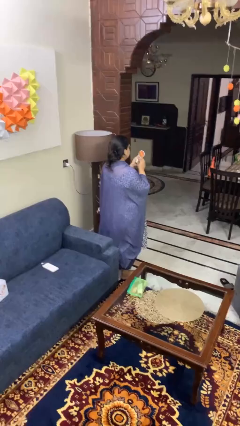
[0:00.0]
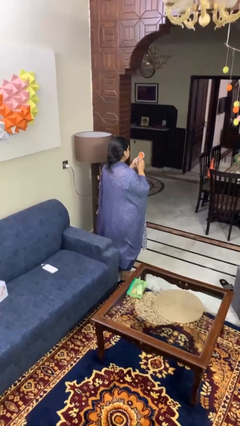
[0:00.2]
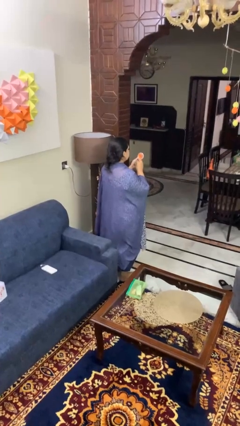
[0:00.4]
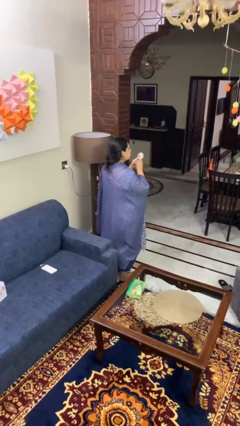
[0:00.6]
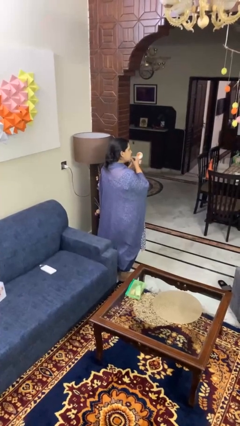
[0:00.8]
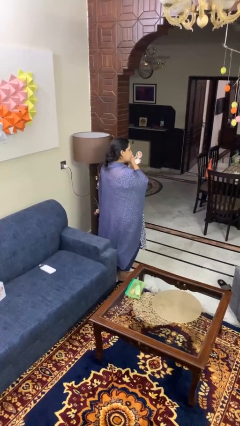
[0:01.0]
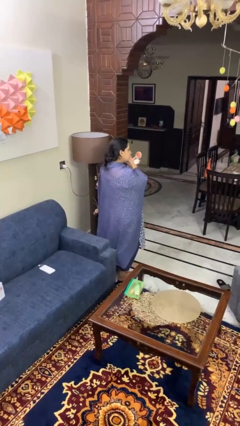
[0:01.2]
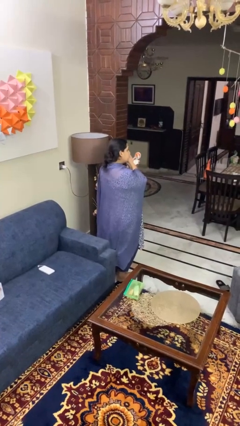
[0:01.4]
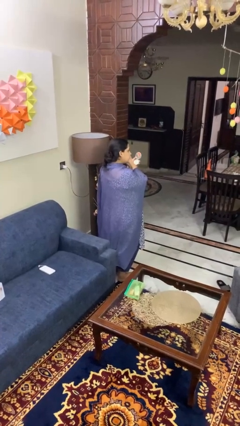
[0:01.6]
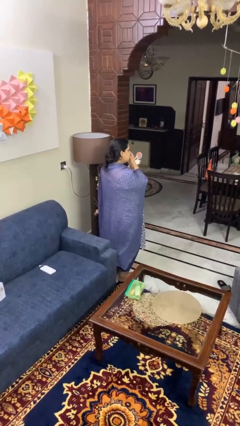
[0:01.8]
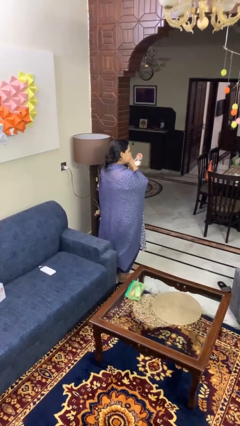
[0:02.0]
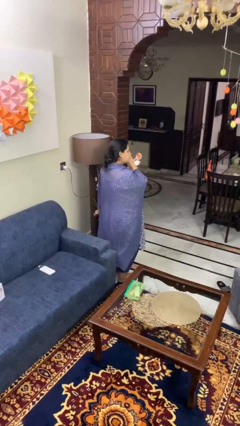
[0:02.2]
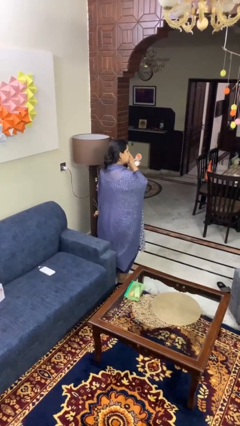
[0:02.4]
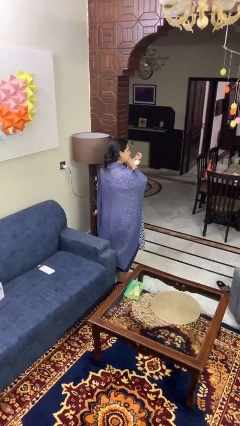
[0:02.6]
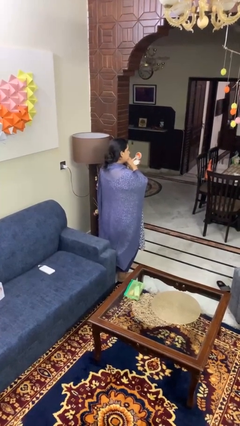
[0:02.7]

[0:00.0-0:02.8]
person applies foundation makeup

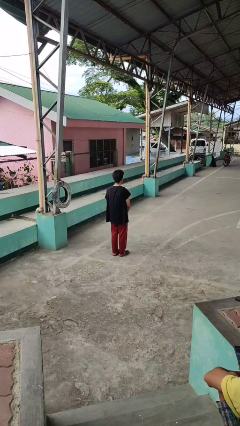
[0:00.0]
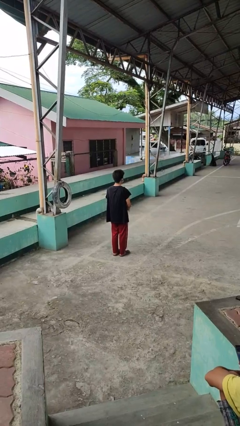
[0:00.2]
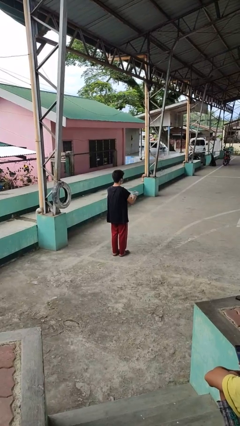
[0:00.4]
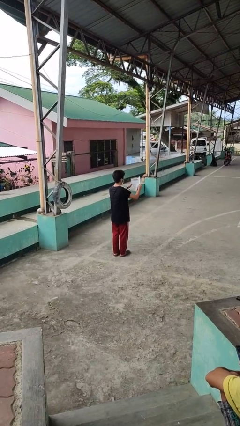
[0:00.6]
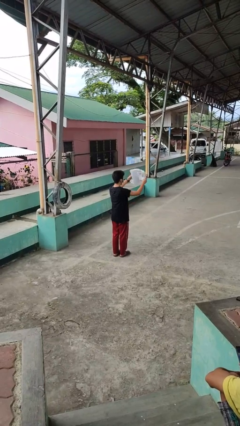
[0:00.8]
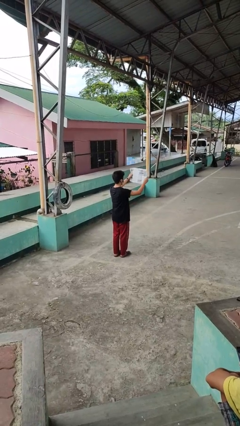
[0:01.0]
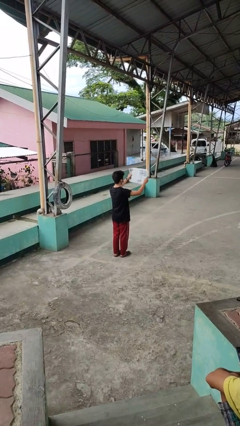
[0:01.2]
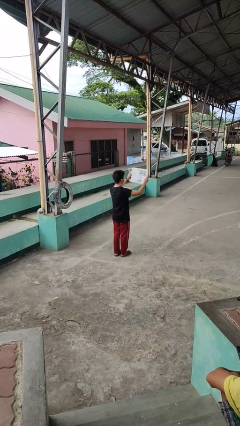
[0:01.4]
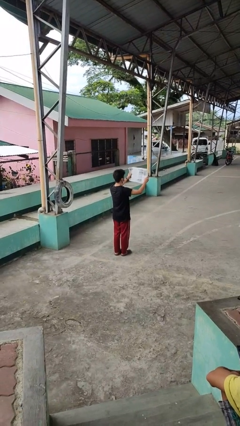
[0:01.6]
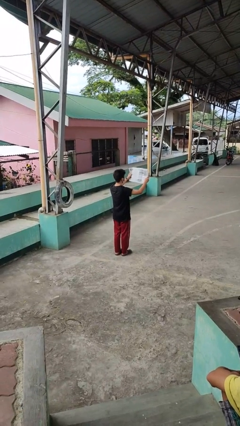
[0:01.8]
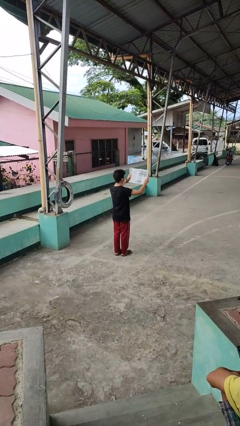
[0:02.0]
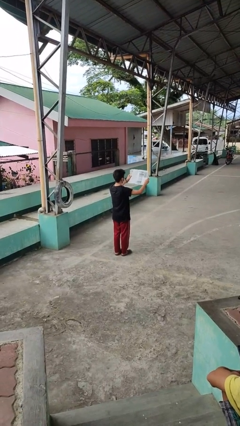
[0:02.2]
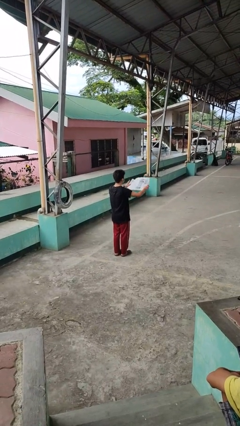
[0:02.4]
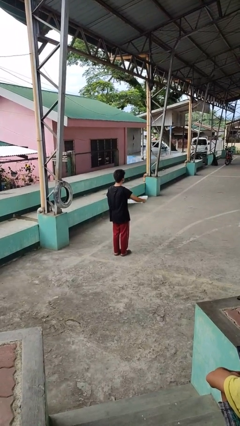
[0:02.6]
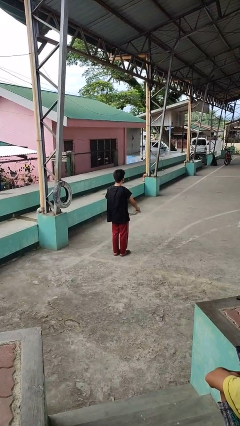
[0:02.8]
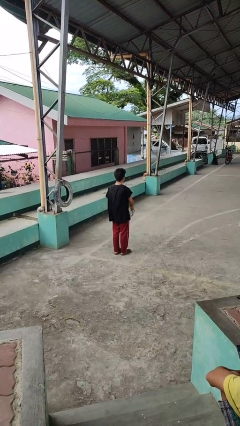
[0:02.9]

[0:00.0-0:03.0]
person reads newspaper

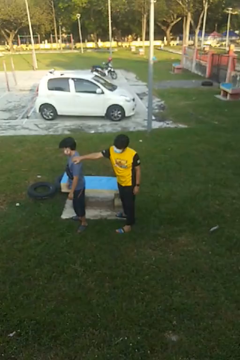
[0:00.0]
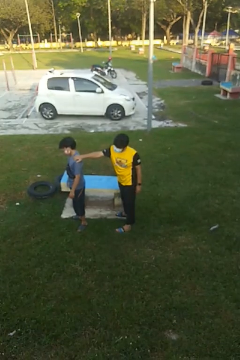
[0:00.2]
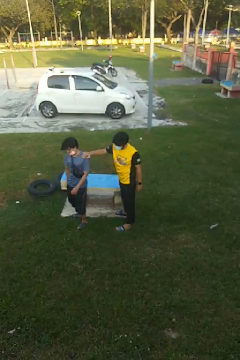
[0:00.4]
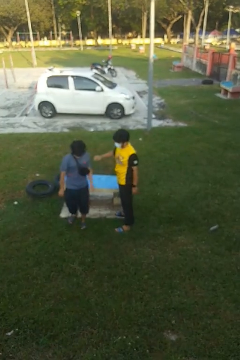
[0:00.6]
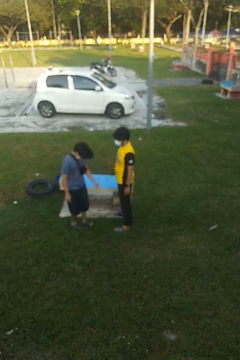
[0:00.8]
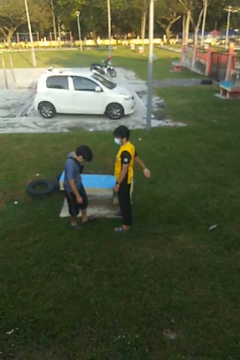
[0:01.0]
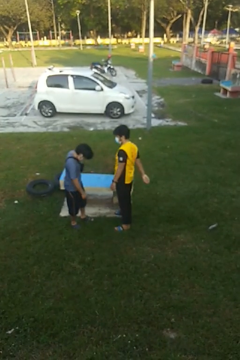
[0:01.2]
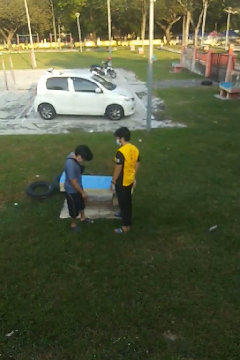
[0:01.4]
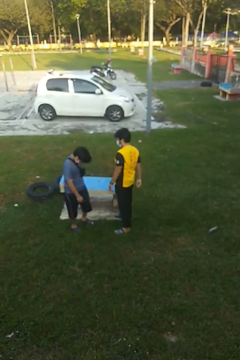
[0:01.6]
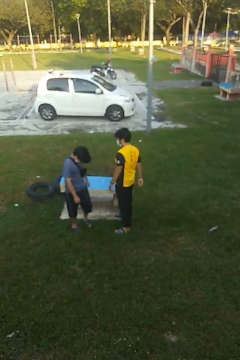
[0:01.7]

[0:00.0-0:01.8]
person spins person around

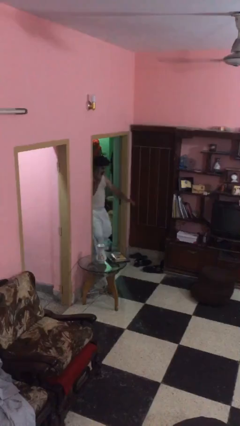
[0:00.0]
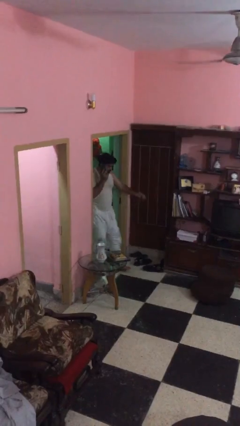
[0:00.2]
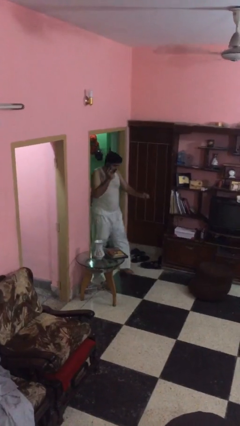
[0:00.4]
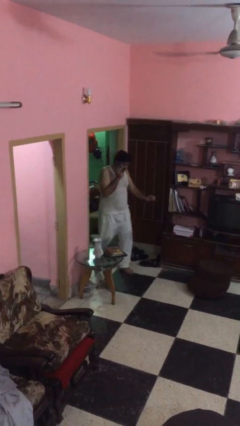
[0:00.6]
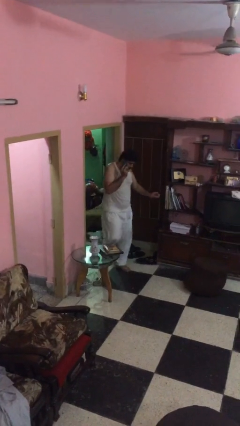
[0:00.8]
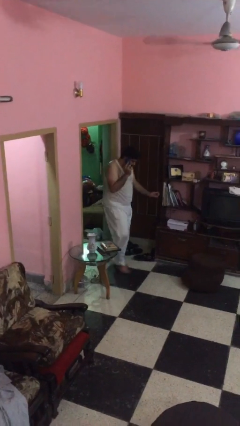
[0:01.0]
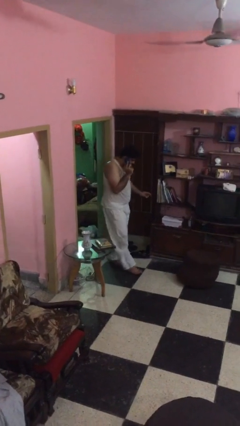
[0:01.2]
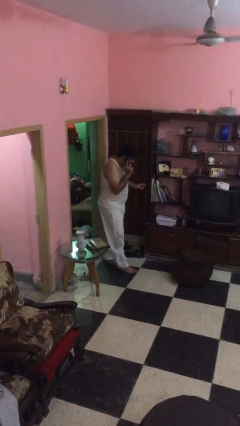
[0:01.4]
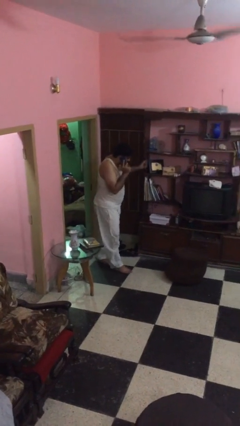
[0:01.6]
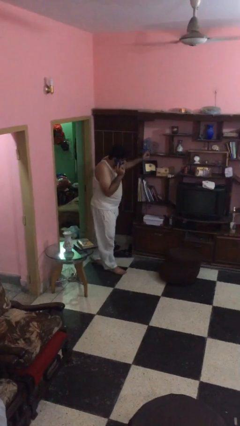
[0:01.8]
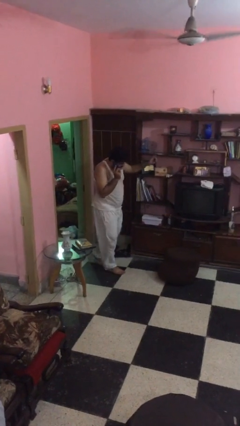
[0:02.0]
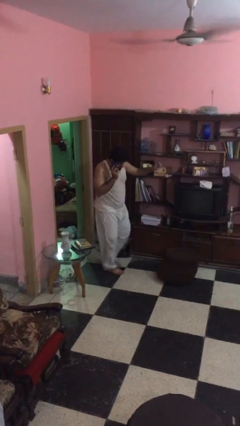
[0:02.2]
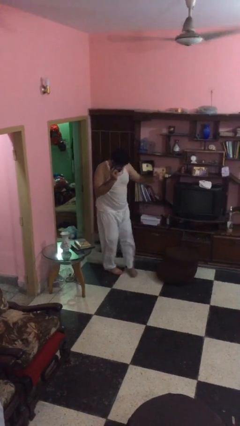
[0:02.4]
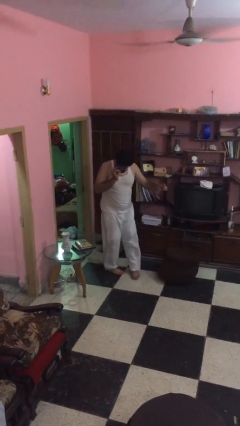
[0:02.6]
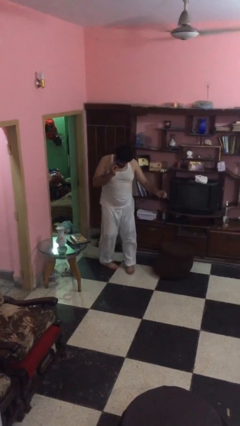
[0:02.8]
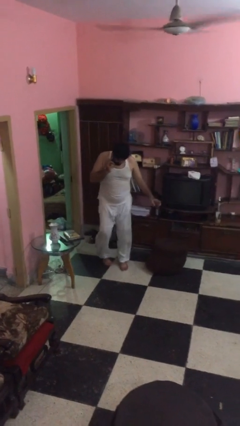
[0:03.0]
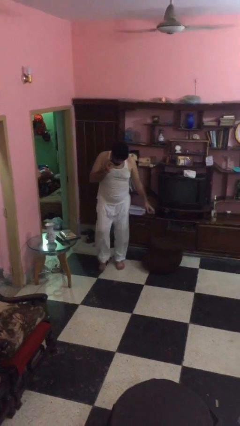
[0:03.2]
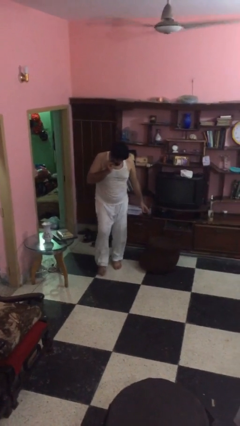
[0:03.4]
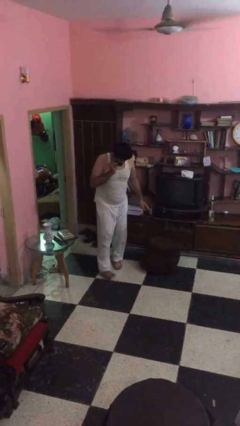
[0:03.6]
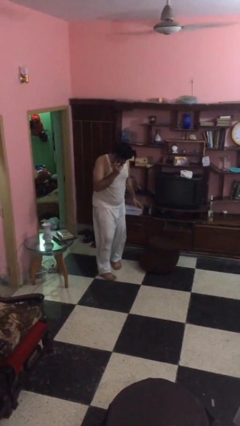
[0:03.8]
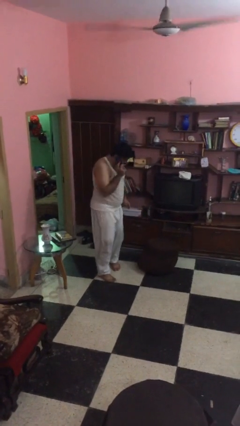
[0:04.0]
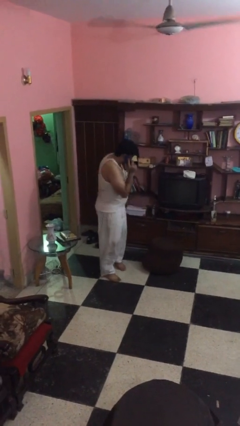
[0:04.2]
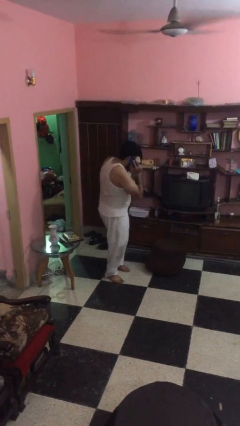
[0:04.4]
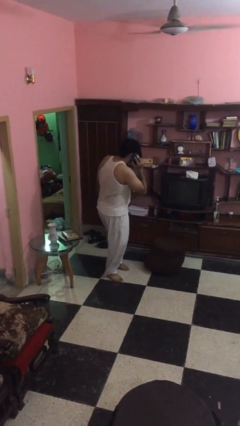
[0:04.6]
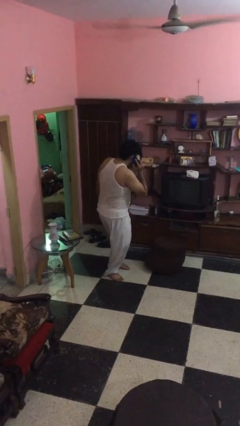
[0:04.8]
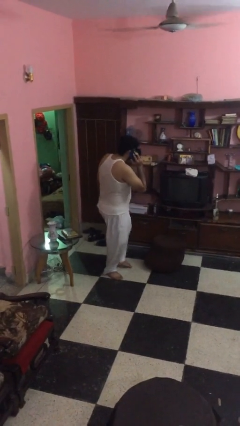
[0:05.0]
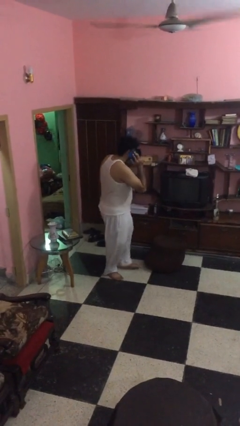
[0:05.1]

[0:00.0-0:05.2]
person enters scene through structure

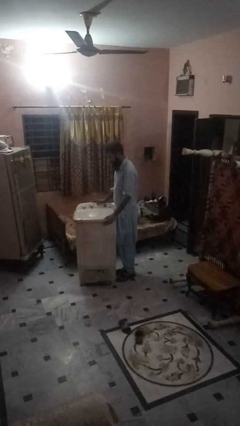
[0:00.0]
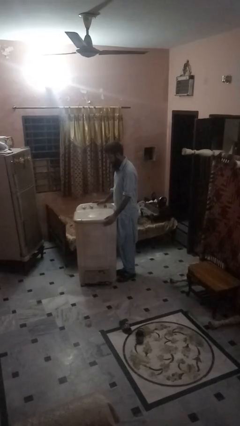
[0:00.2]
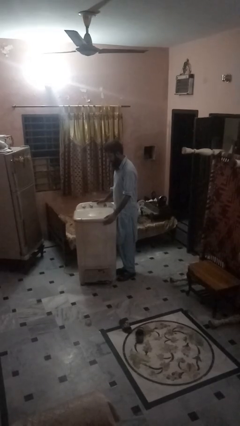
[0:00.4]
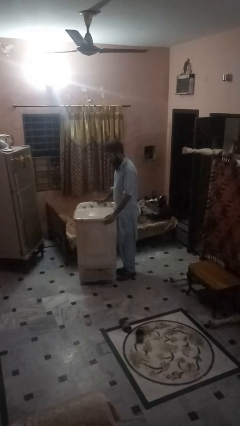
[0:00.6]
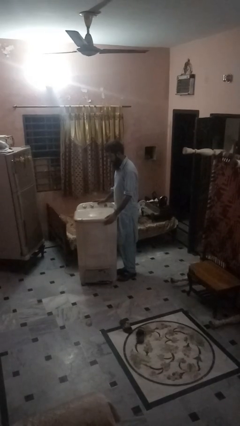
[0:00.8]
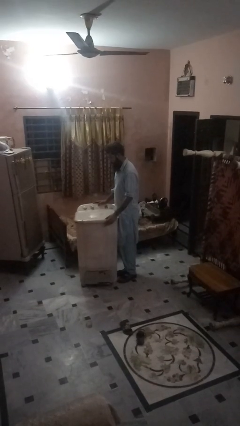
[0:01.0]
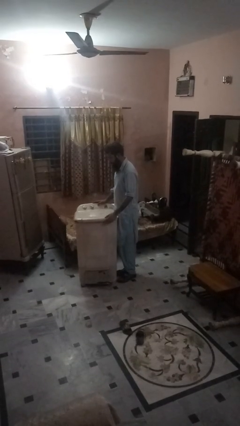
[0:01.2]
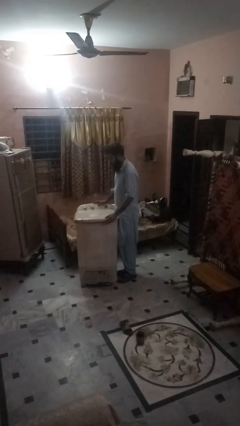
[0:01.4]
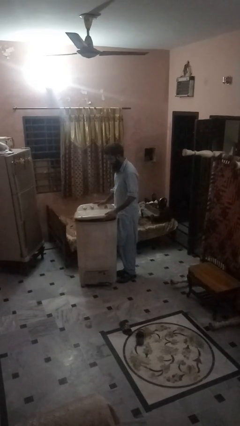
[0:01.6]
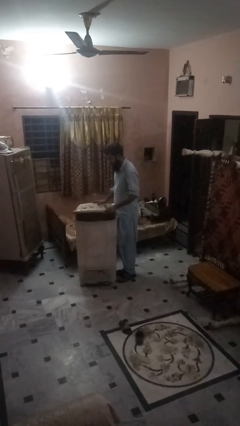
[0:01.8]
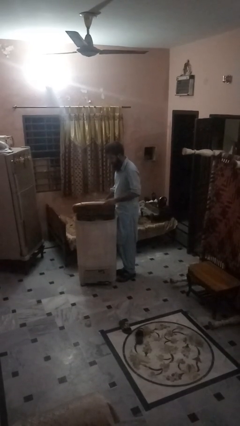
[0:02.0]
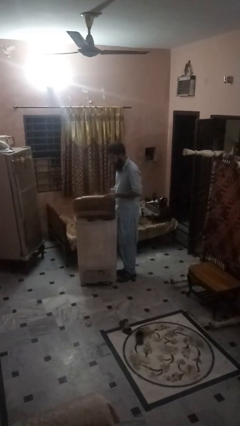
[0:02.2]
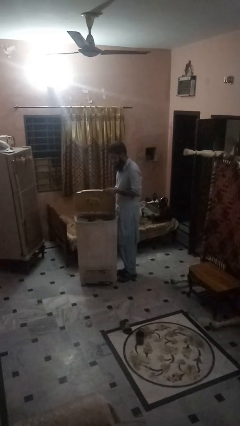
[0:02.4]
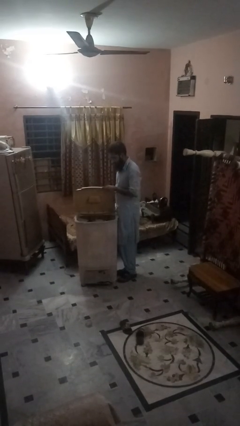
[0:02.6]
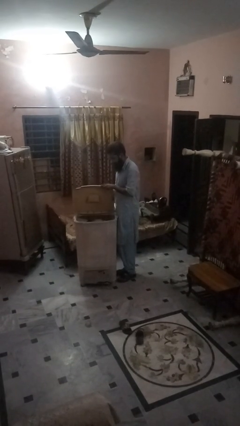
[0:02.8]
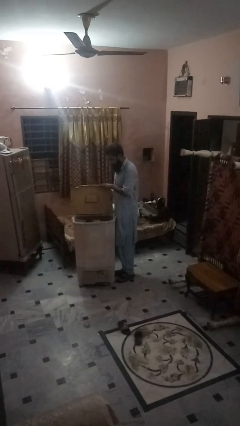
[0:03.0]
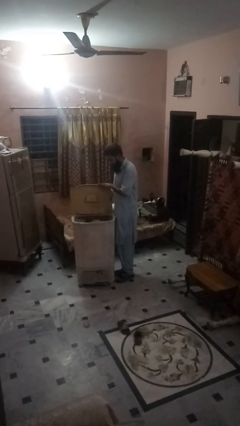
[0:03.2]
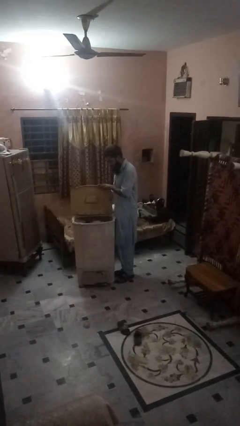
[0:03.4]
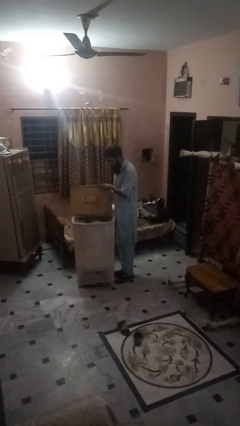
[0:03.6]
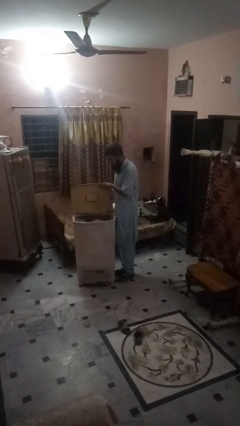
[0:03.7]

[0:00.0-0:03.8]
person opens clothes washer

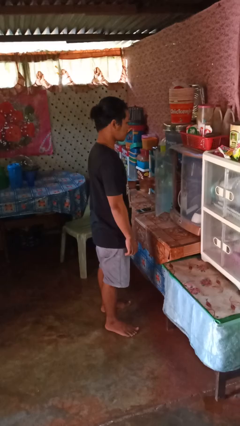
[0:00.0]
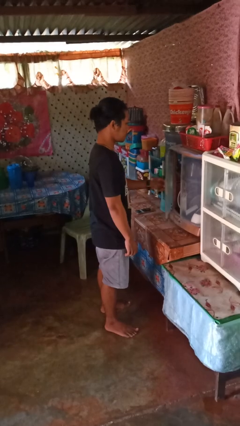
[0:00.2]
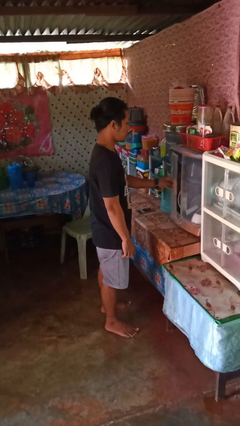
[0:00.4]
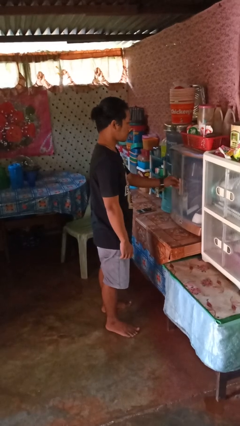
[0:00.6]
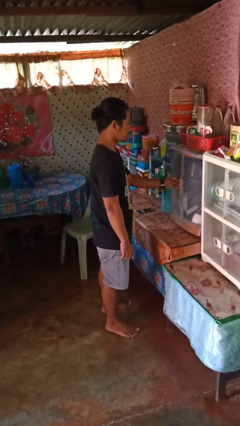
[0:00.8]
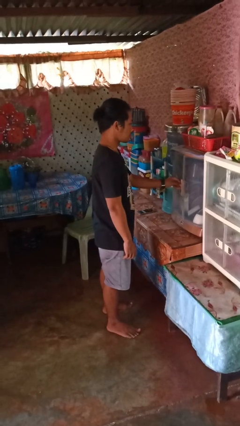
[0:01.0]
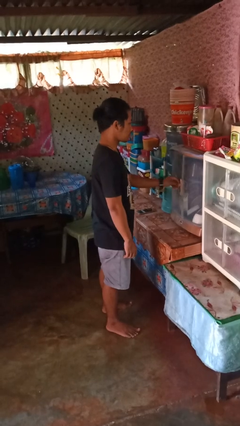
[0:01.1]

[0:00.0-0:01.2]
person closes cabinet
